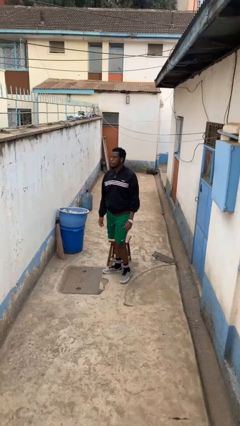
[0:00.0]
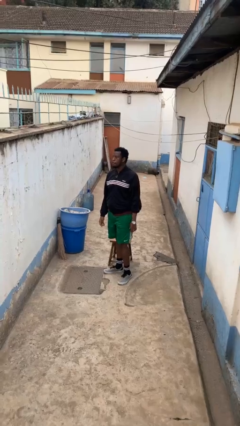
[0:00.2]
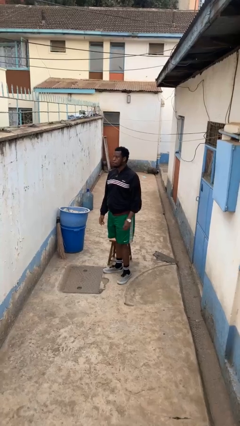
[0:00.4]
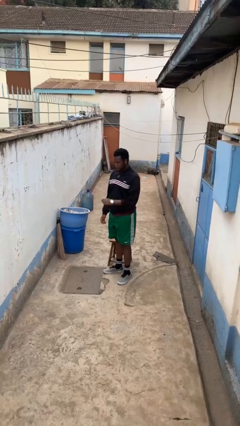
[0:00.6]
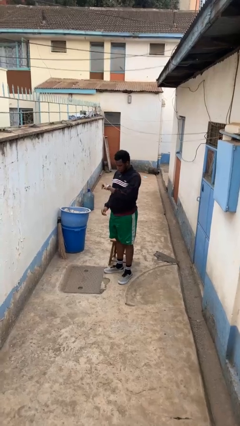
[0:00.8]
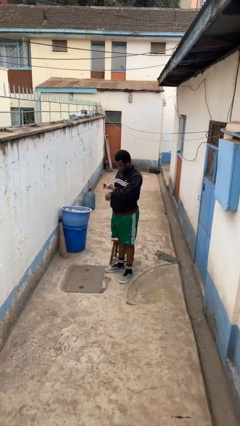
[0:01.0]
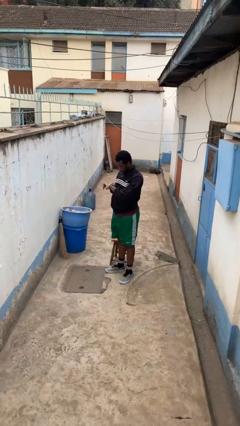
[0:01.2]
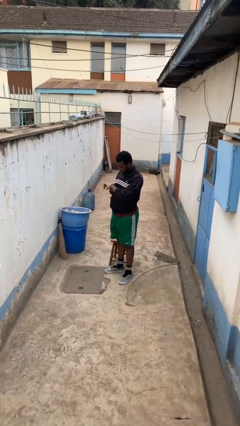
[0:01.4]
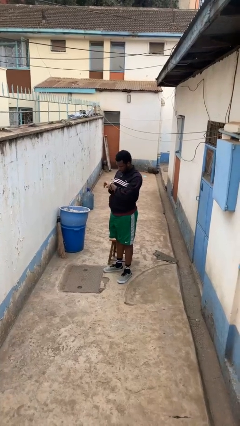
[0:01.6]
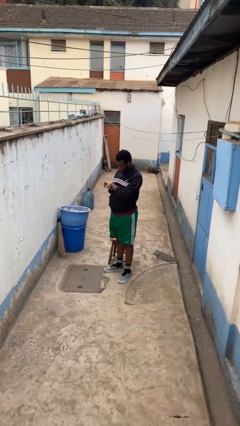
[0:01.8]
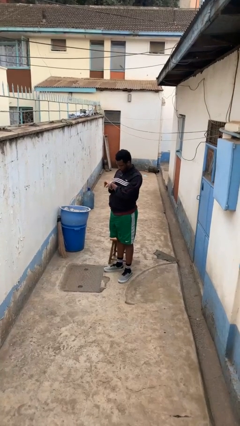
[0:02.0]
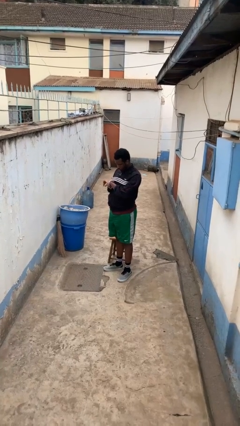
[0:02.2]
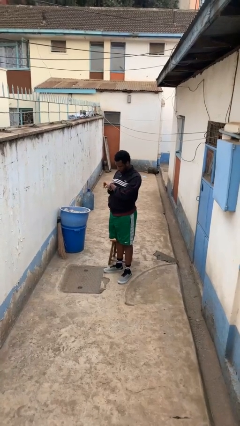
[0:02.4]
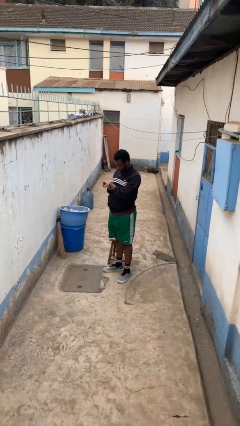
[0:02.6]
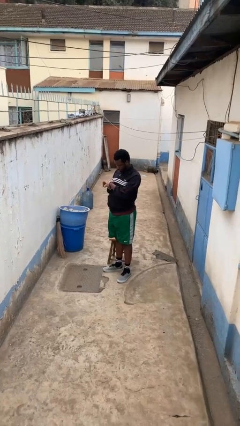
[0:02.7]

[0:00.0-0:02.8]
person looks at wristwatch

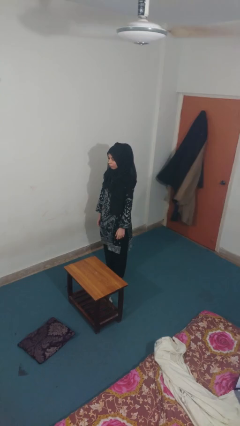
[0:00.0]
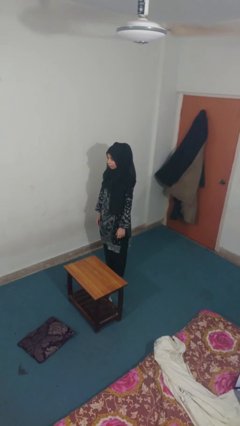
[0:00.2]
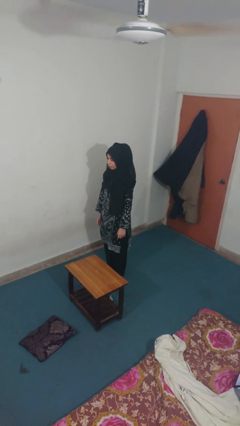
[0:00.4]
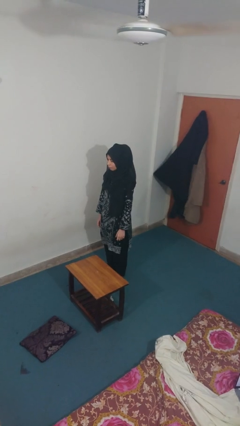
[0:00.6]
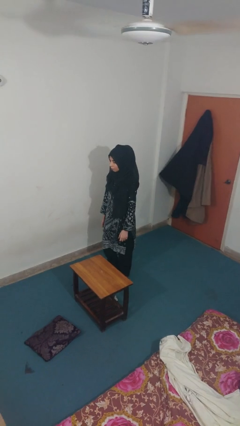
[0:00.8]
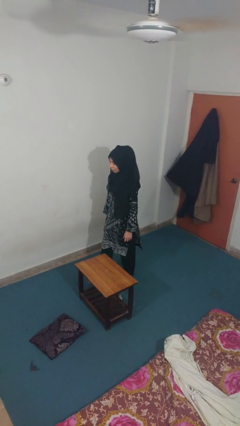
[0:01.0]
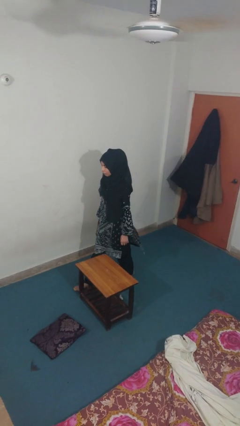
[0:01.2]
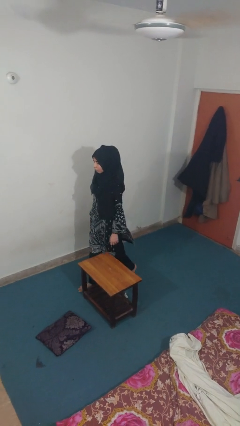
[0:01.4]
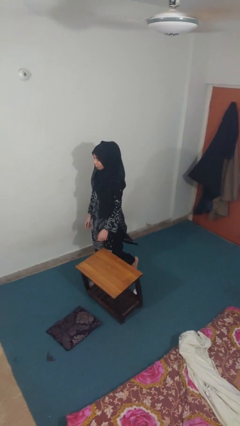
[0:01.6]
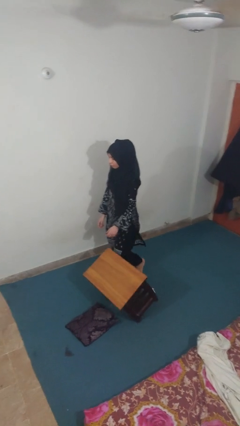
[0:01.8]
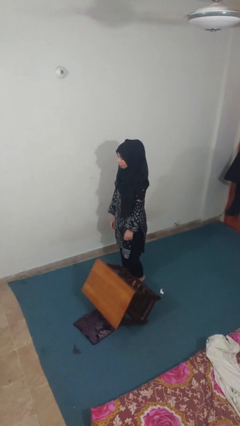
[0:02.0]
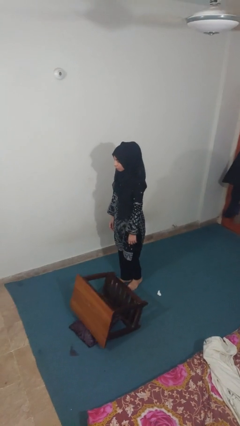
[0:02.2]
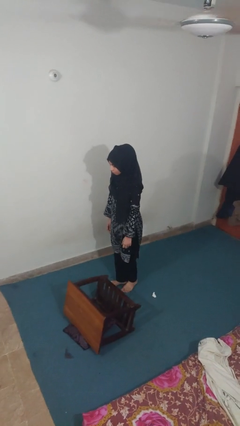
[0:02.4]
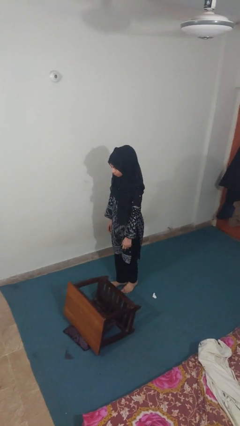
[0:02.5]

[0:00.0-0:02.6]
person knocks over furniture

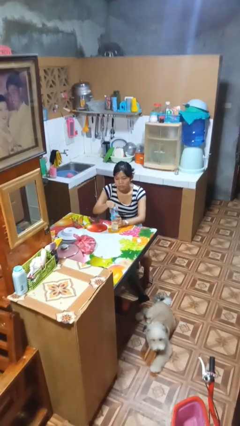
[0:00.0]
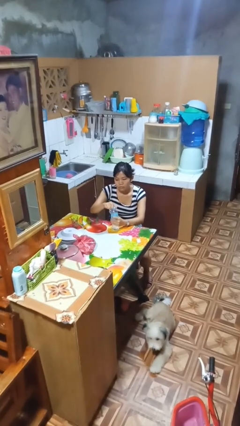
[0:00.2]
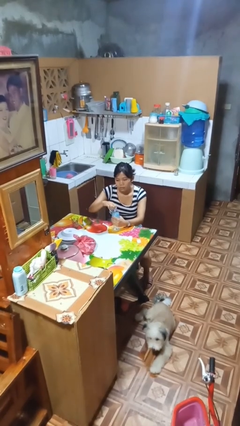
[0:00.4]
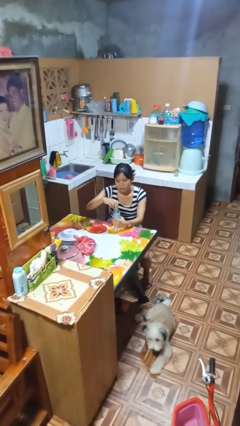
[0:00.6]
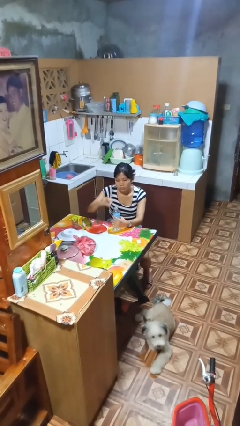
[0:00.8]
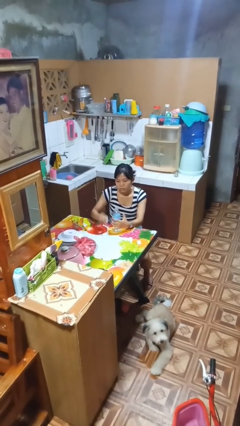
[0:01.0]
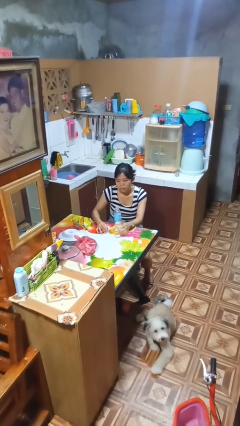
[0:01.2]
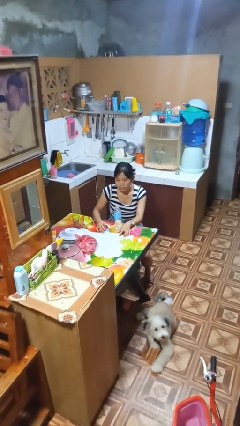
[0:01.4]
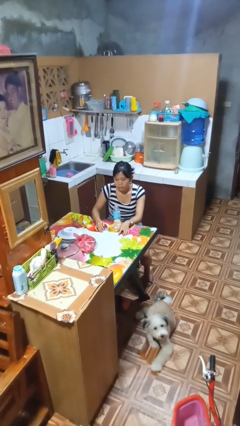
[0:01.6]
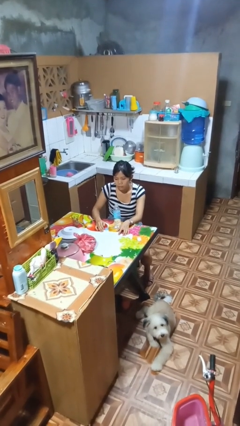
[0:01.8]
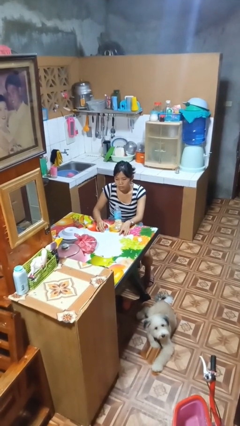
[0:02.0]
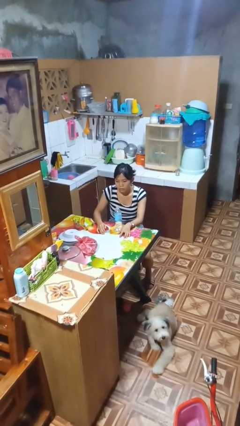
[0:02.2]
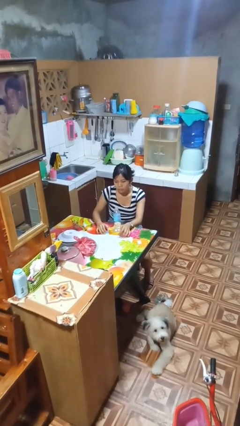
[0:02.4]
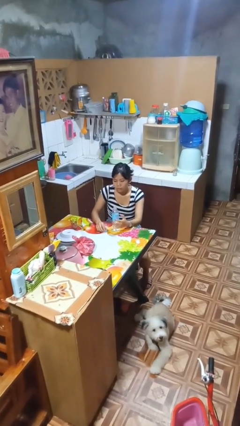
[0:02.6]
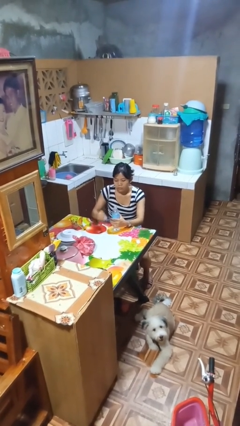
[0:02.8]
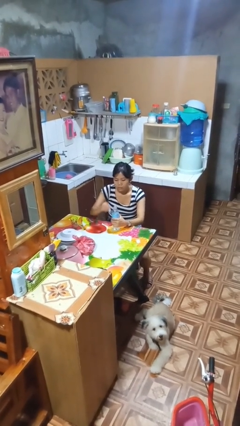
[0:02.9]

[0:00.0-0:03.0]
person unscrews lid from bottle

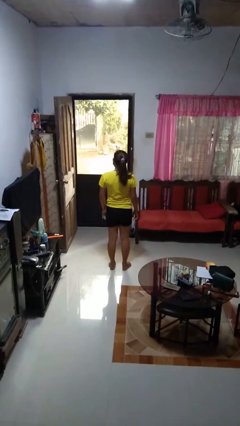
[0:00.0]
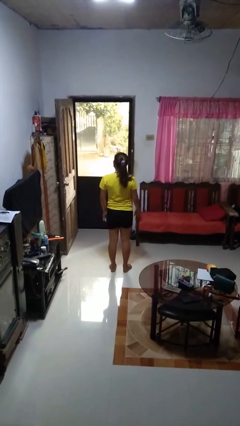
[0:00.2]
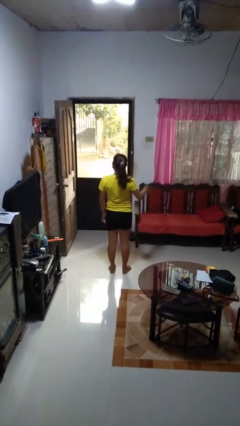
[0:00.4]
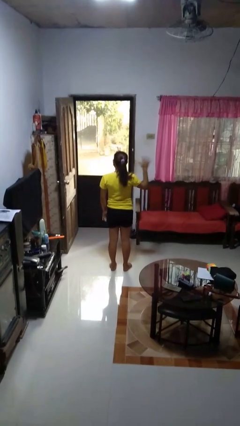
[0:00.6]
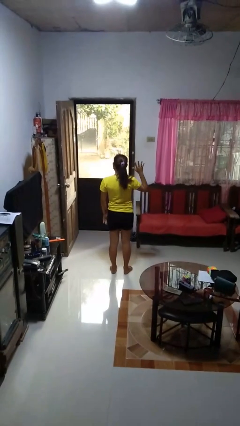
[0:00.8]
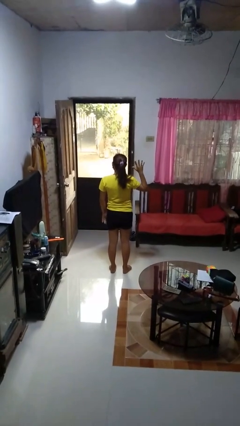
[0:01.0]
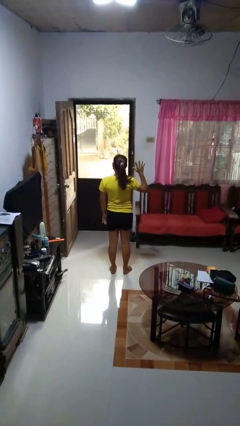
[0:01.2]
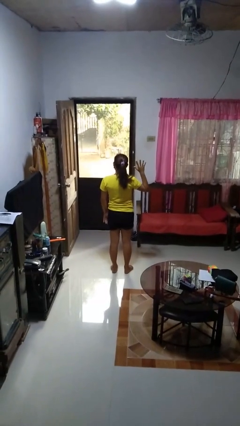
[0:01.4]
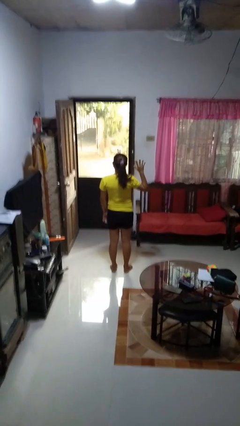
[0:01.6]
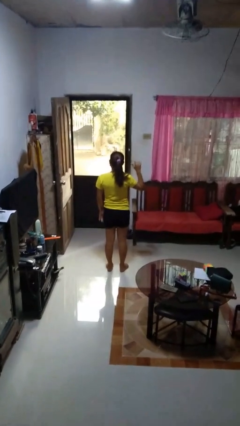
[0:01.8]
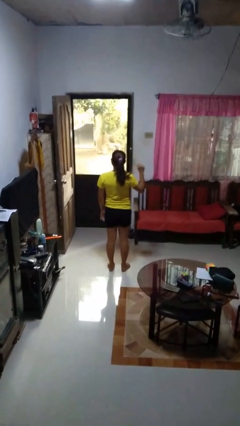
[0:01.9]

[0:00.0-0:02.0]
person gestures number five

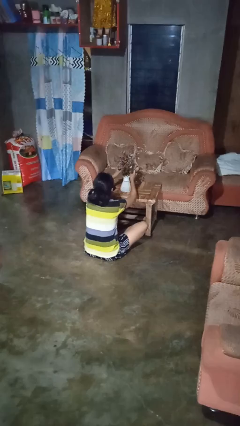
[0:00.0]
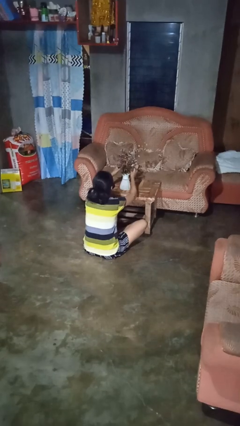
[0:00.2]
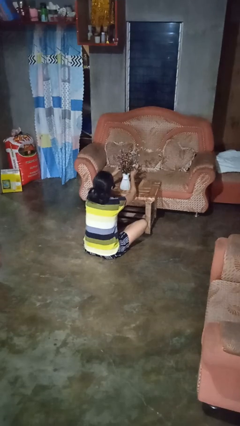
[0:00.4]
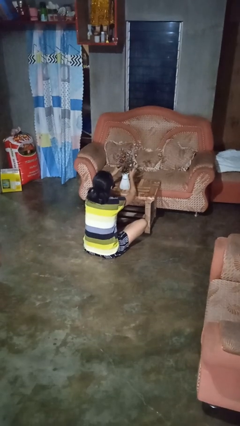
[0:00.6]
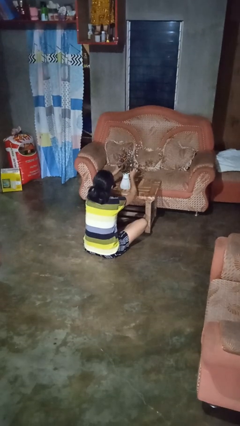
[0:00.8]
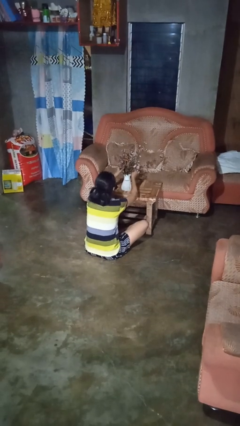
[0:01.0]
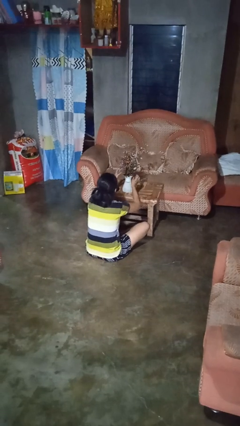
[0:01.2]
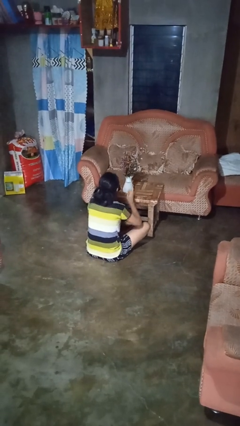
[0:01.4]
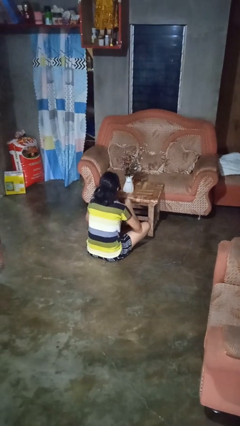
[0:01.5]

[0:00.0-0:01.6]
person arranges flowers in vase

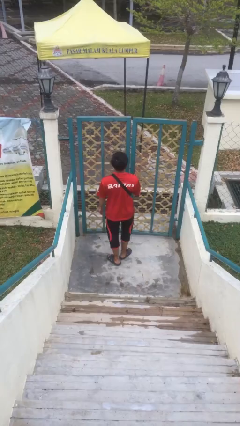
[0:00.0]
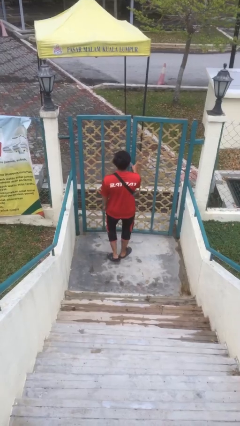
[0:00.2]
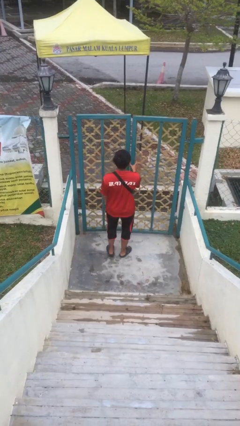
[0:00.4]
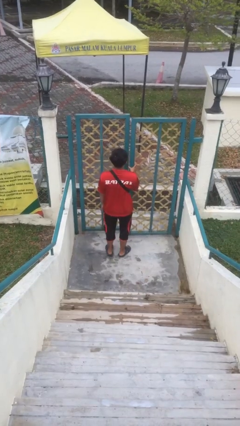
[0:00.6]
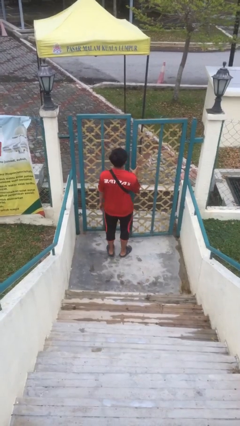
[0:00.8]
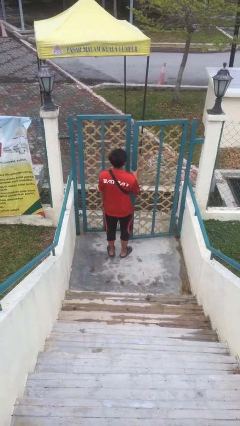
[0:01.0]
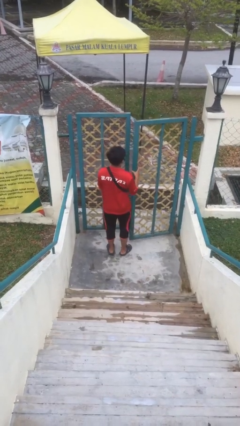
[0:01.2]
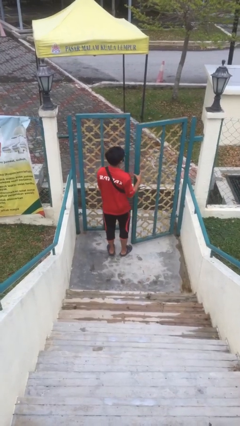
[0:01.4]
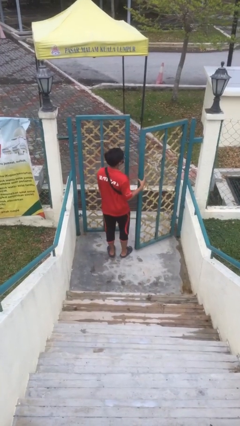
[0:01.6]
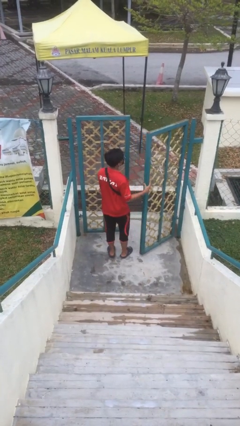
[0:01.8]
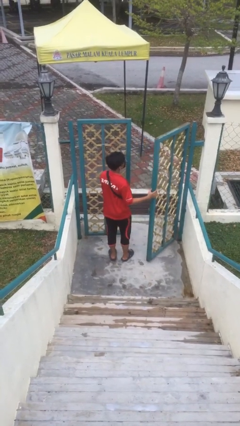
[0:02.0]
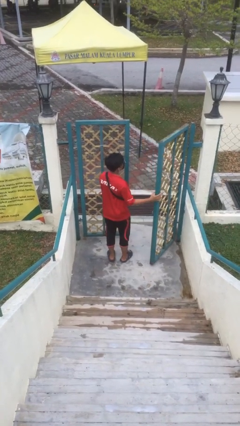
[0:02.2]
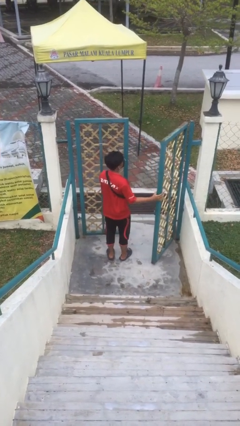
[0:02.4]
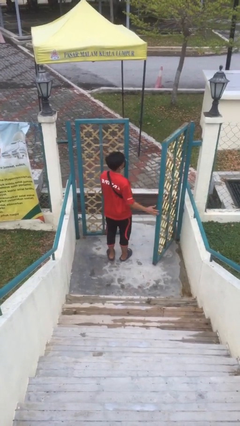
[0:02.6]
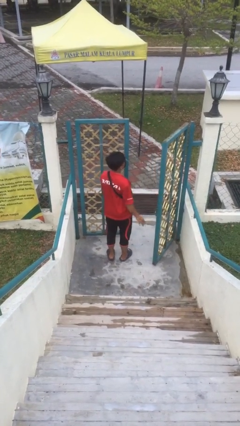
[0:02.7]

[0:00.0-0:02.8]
person opens facility door

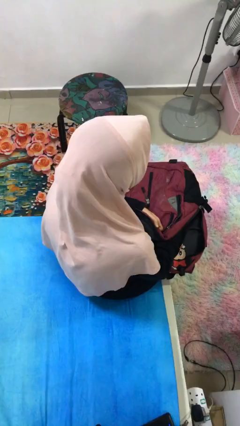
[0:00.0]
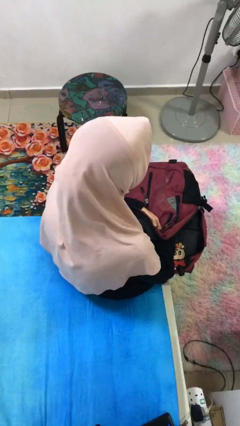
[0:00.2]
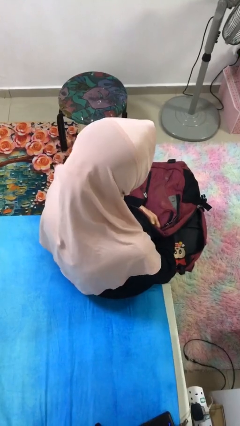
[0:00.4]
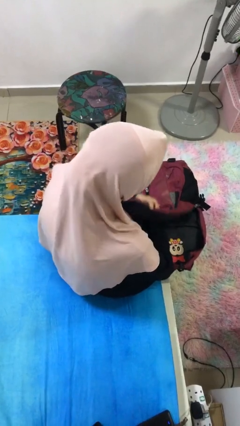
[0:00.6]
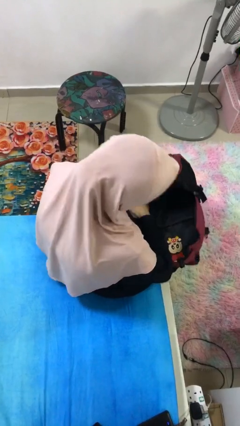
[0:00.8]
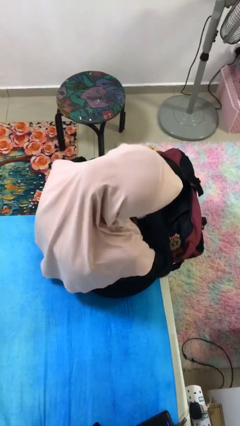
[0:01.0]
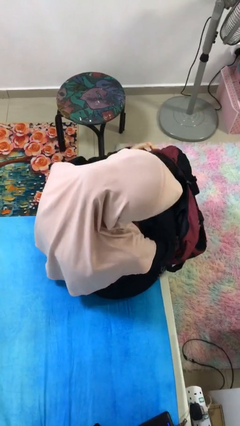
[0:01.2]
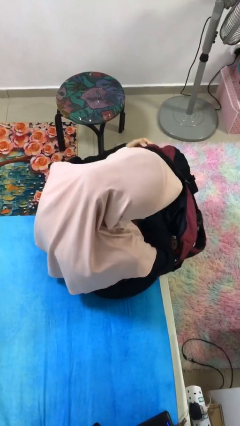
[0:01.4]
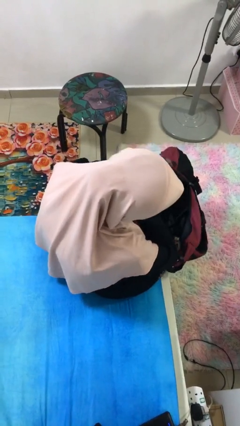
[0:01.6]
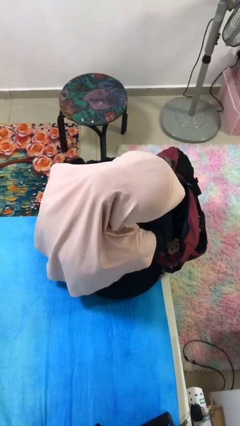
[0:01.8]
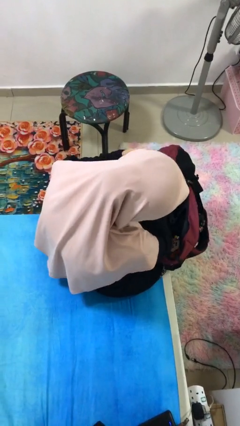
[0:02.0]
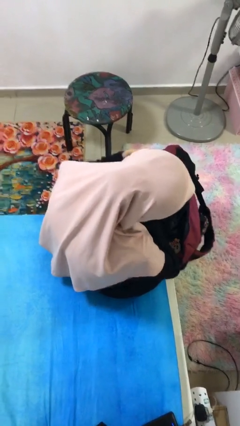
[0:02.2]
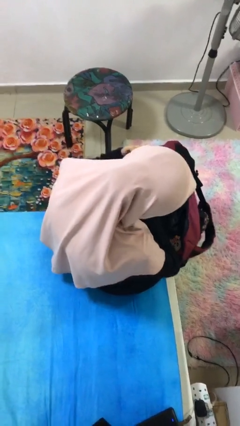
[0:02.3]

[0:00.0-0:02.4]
person searches in backpack
